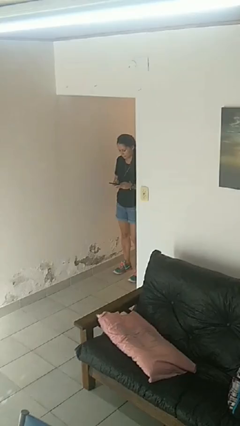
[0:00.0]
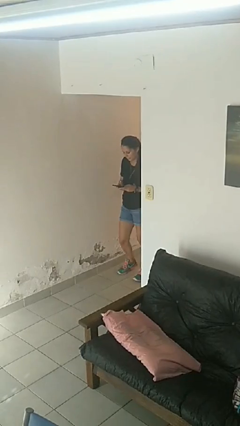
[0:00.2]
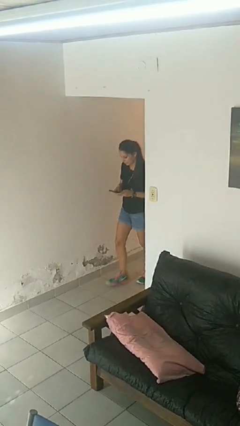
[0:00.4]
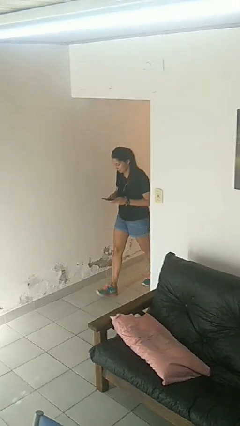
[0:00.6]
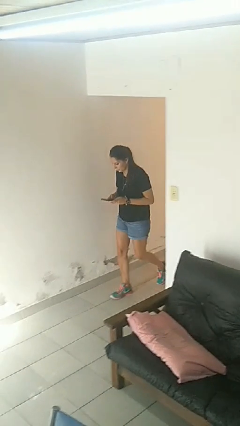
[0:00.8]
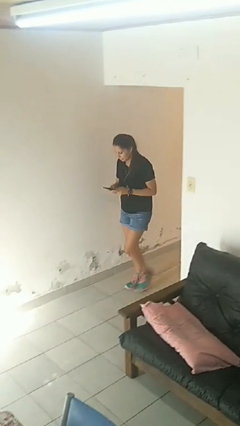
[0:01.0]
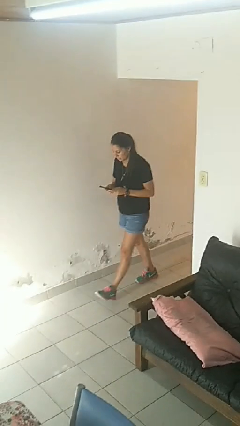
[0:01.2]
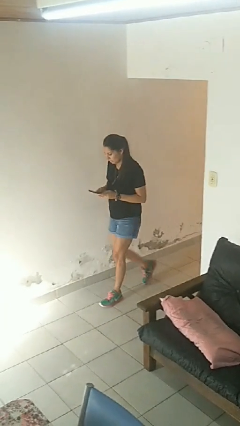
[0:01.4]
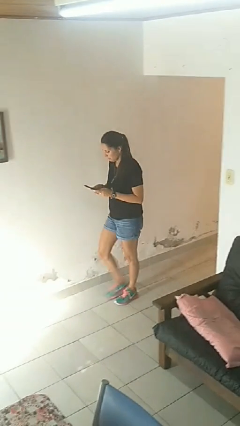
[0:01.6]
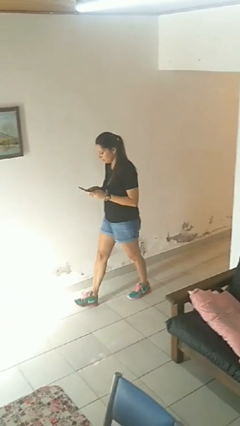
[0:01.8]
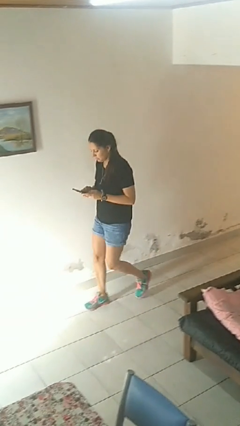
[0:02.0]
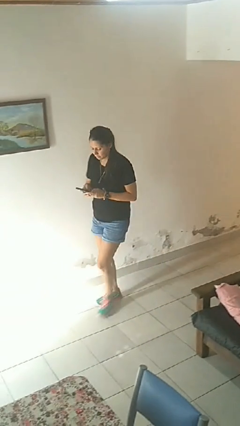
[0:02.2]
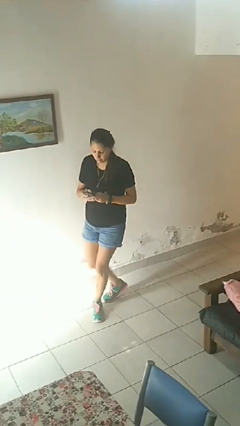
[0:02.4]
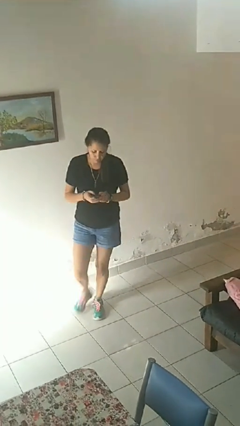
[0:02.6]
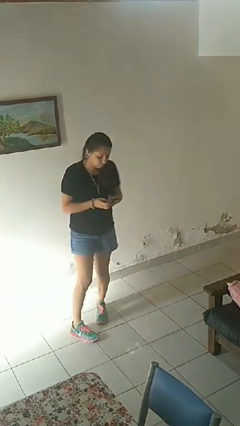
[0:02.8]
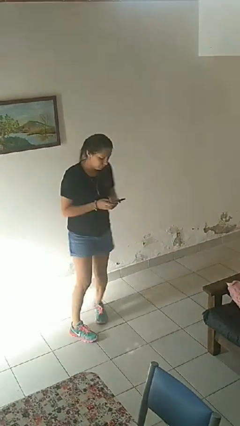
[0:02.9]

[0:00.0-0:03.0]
person enters scene through structure

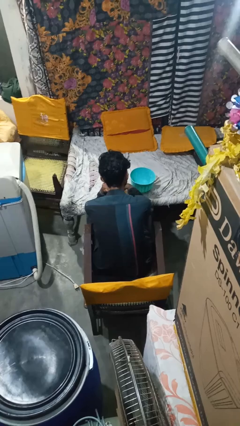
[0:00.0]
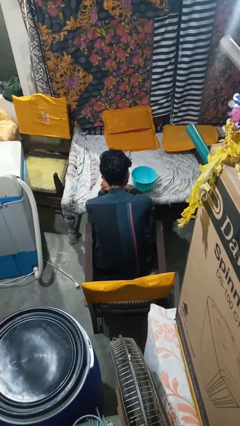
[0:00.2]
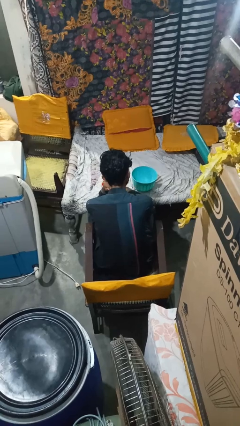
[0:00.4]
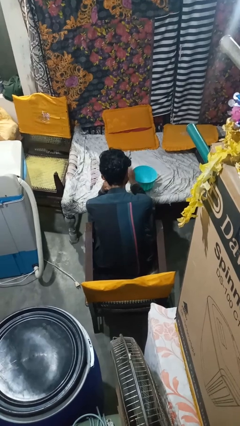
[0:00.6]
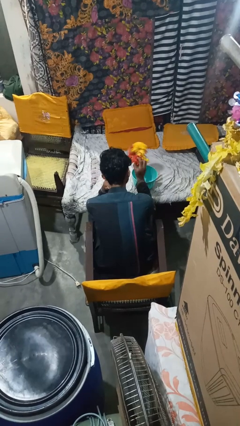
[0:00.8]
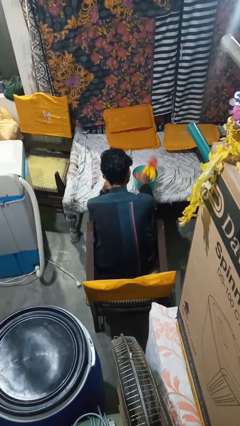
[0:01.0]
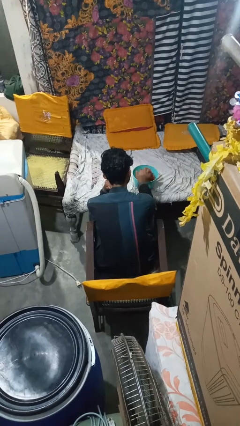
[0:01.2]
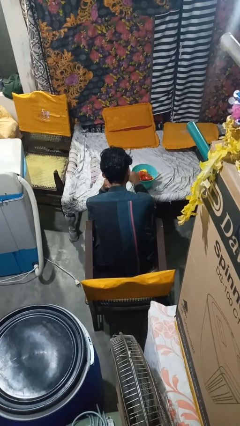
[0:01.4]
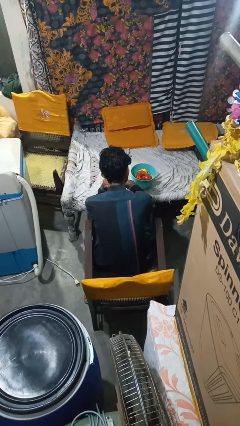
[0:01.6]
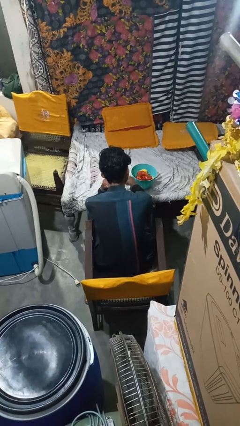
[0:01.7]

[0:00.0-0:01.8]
person pours into bowl

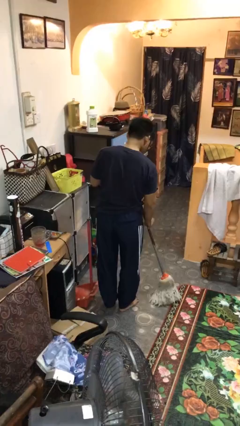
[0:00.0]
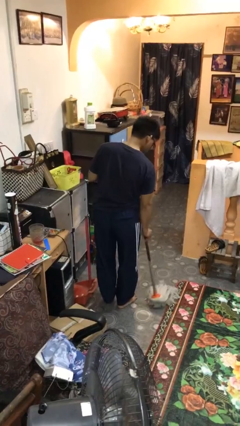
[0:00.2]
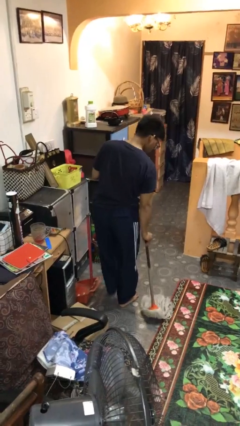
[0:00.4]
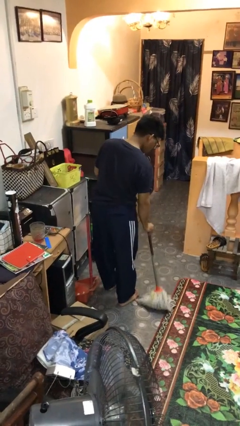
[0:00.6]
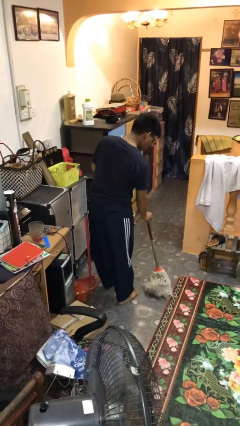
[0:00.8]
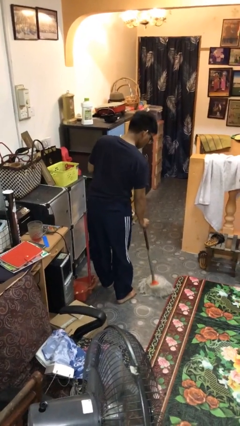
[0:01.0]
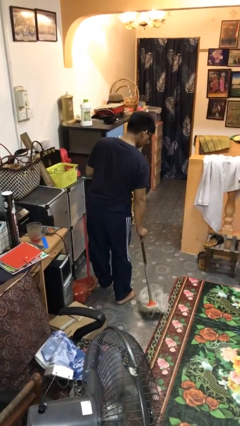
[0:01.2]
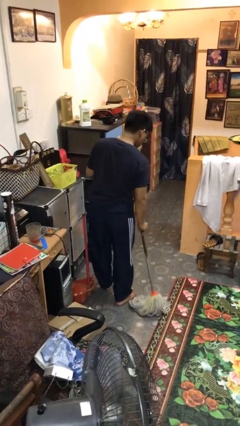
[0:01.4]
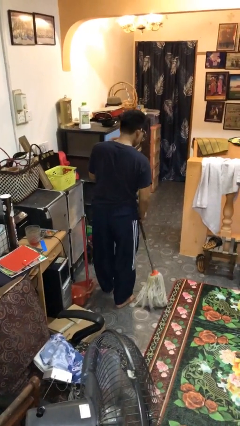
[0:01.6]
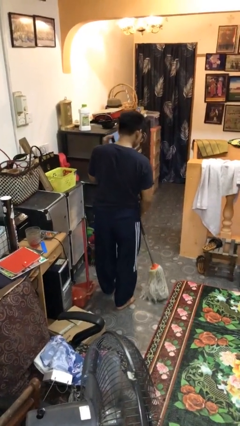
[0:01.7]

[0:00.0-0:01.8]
person mops

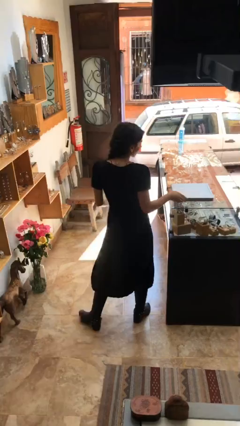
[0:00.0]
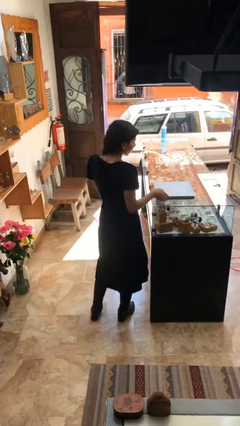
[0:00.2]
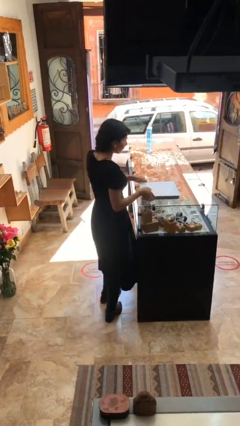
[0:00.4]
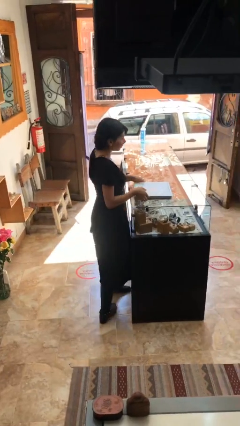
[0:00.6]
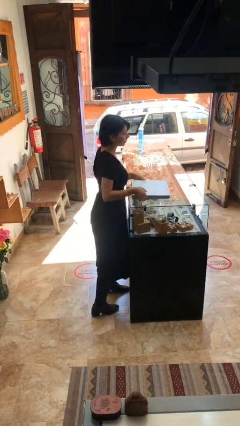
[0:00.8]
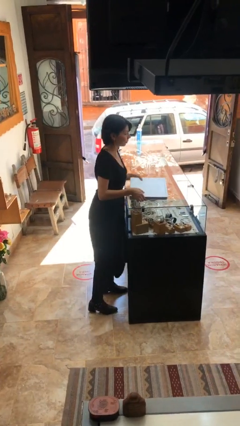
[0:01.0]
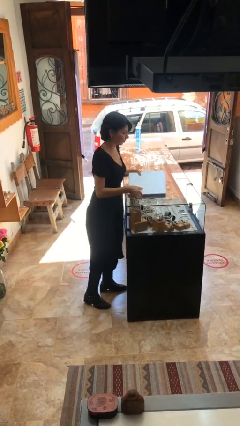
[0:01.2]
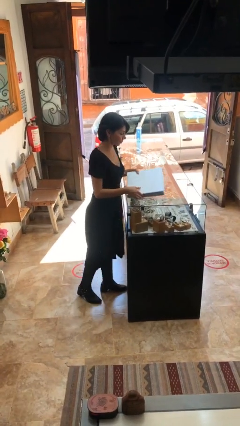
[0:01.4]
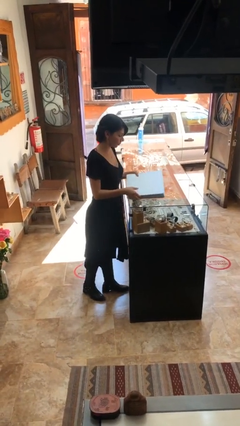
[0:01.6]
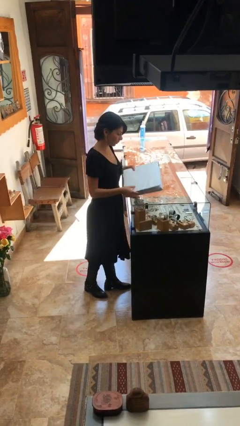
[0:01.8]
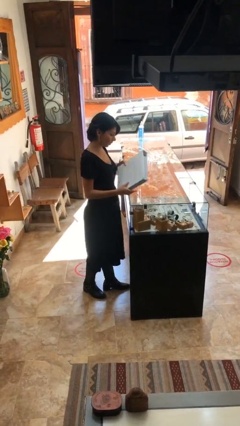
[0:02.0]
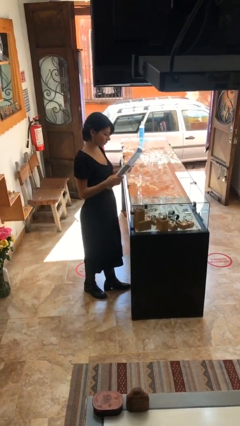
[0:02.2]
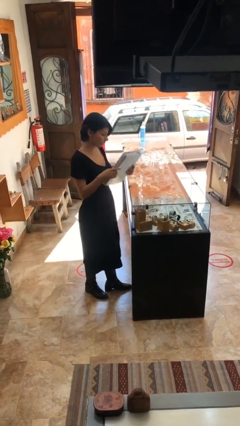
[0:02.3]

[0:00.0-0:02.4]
person picks up object from table

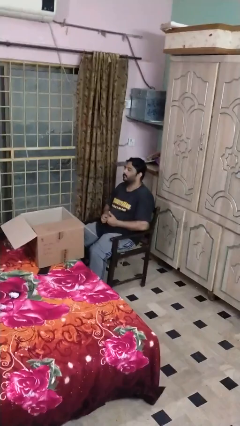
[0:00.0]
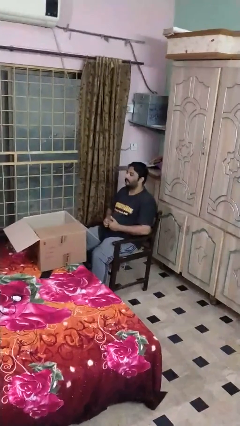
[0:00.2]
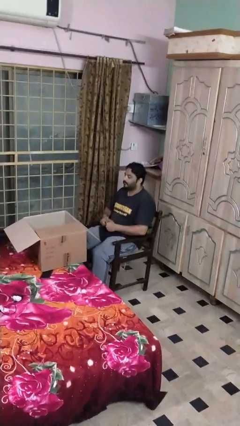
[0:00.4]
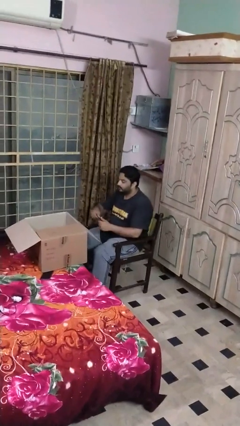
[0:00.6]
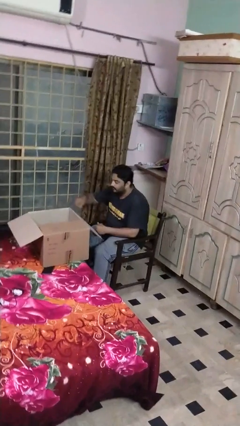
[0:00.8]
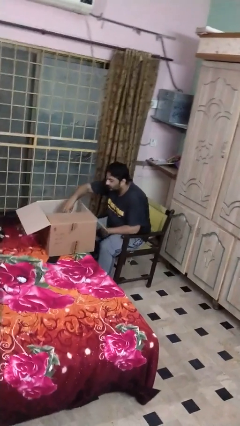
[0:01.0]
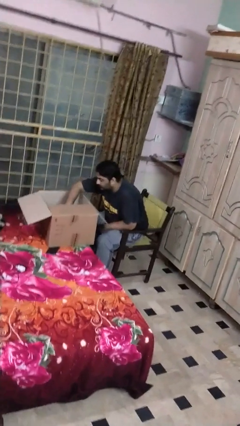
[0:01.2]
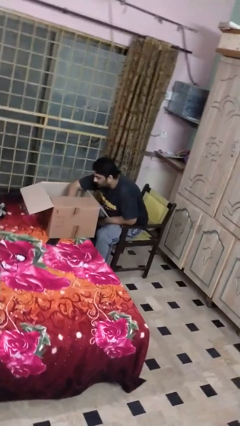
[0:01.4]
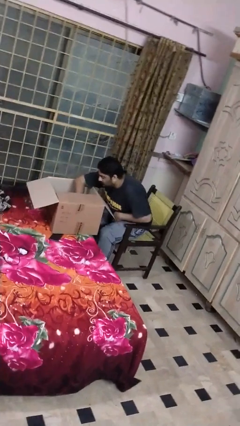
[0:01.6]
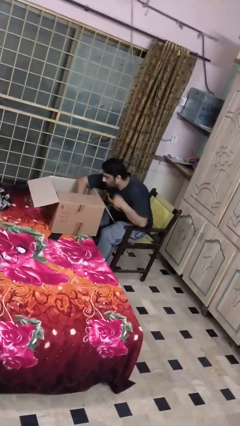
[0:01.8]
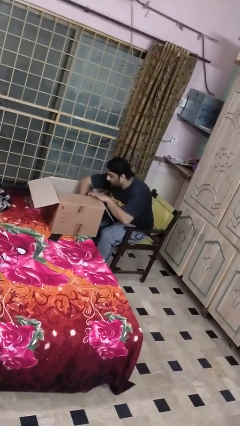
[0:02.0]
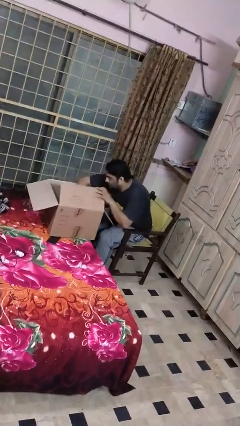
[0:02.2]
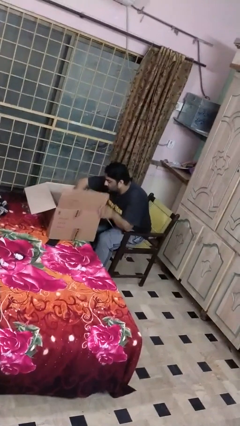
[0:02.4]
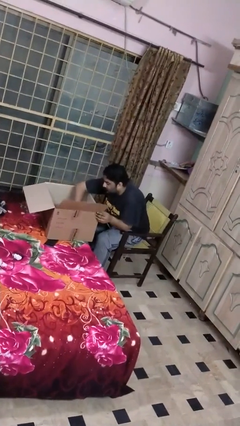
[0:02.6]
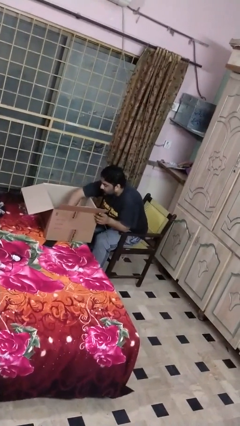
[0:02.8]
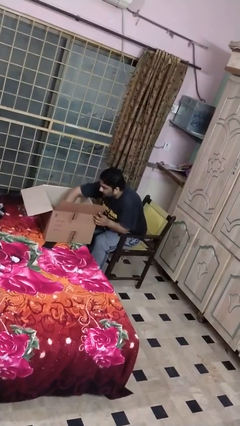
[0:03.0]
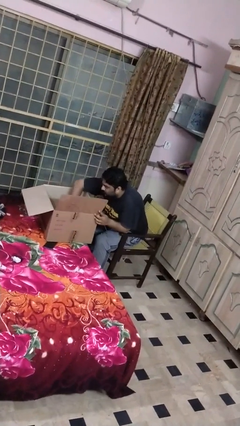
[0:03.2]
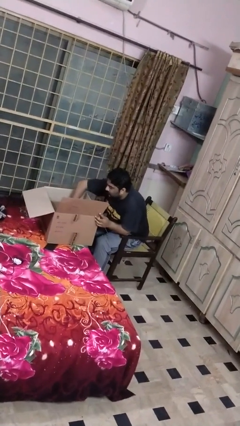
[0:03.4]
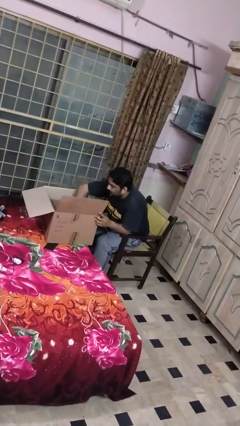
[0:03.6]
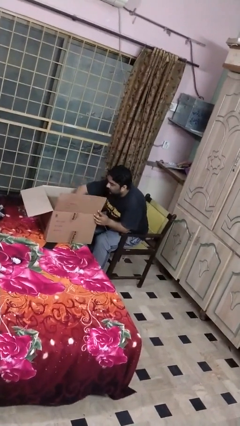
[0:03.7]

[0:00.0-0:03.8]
person searches in box

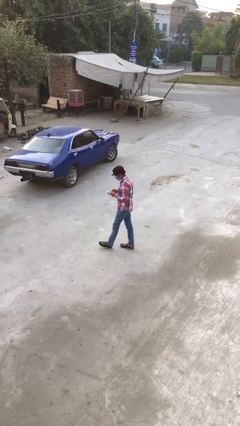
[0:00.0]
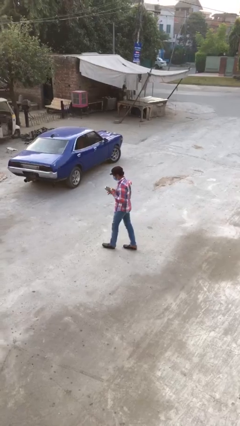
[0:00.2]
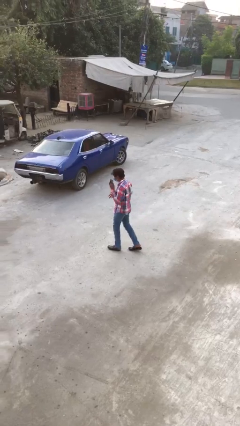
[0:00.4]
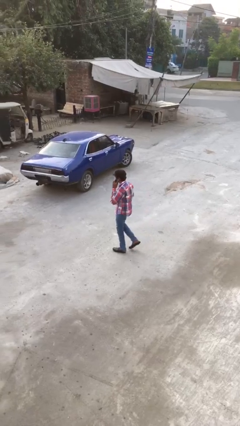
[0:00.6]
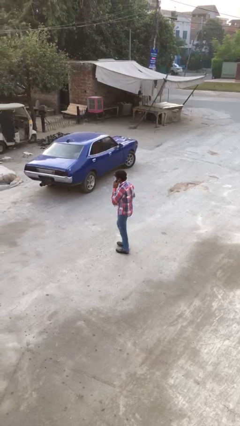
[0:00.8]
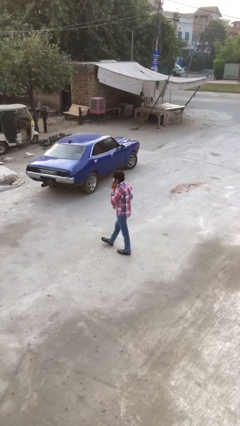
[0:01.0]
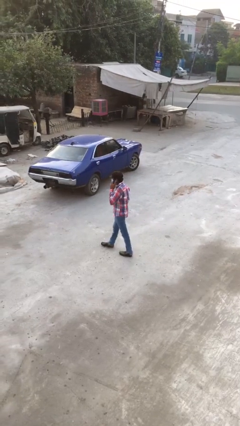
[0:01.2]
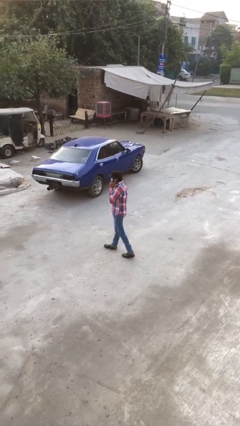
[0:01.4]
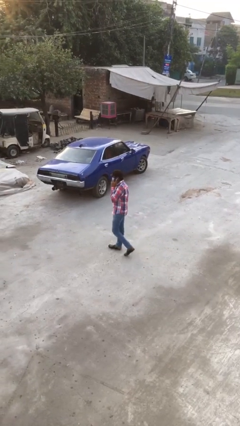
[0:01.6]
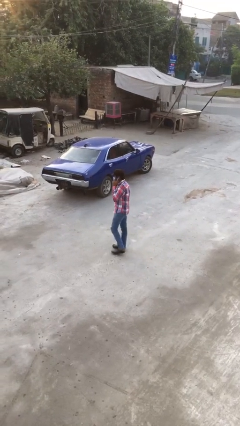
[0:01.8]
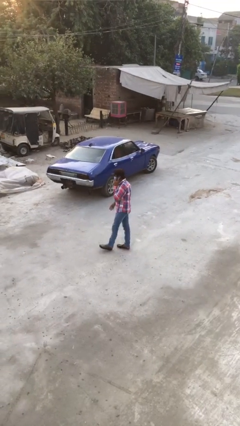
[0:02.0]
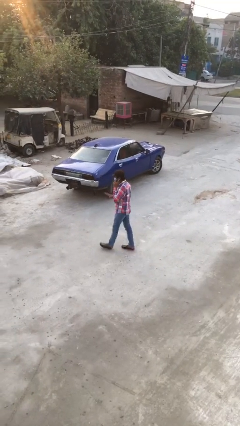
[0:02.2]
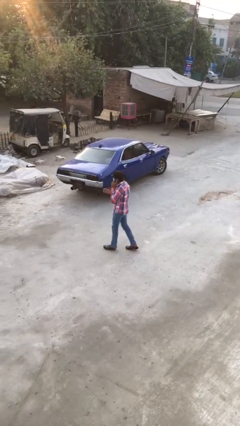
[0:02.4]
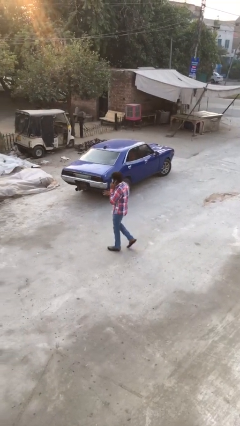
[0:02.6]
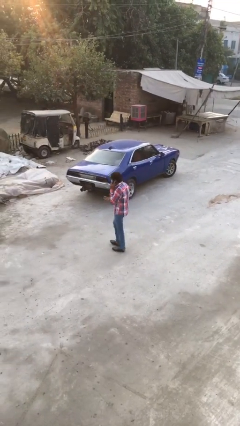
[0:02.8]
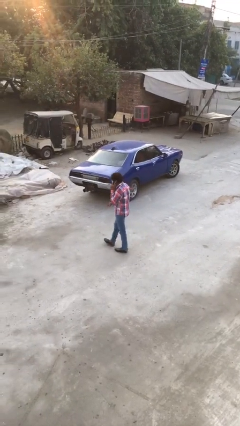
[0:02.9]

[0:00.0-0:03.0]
person talks on phone

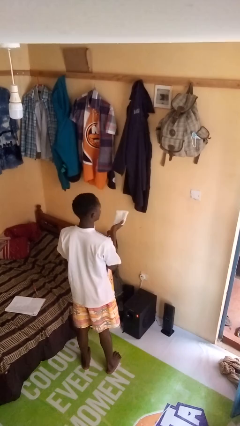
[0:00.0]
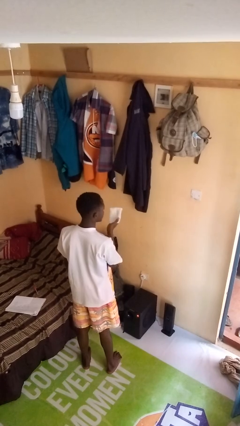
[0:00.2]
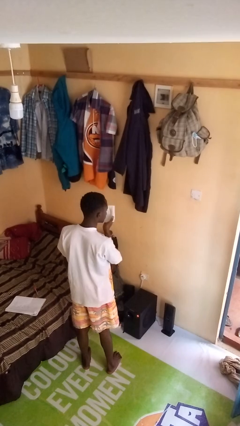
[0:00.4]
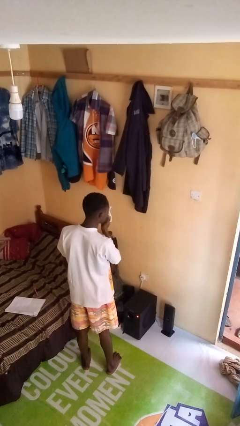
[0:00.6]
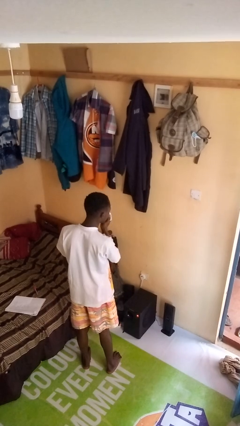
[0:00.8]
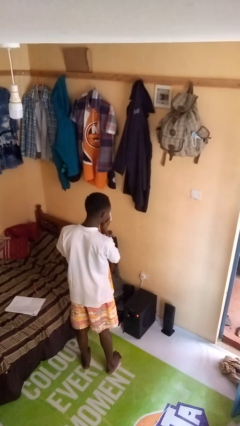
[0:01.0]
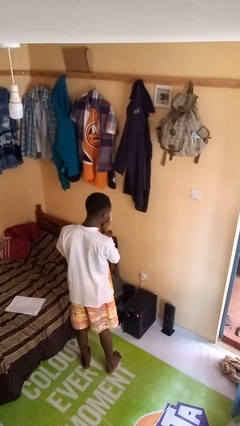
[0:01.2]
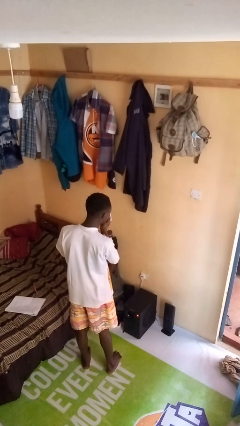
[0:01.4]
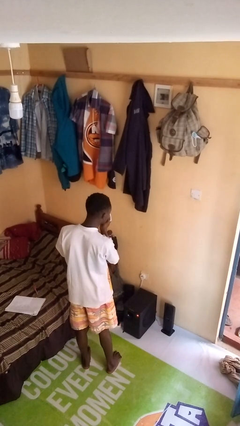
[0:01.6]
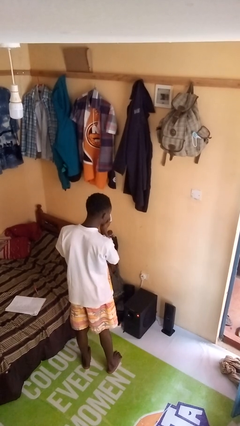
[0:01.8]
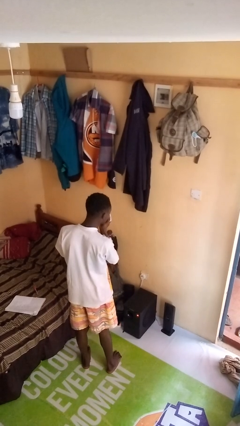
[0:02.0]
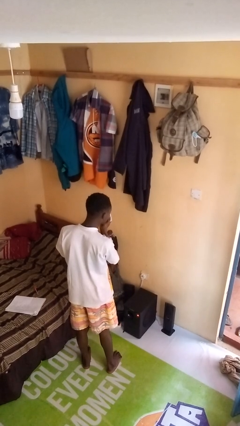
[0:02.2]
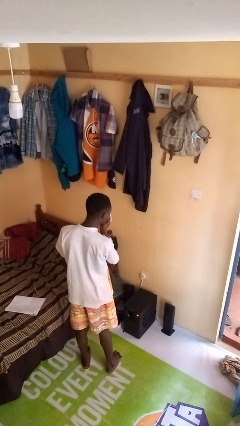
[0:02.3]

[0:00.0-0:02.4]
person blows nose
